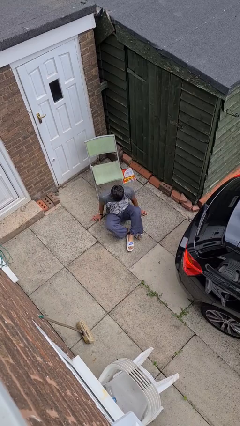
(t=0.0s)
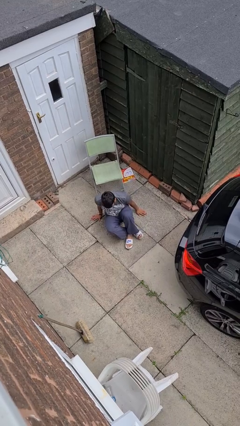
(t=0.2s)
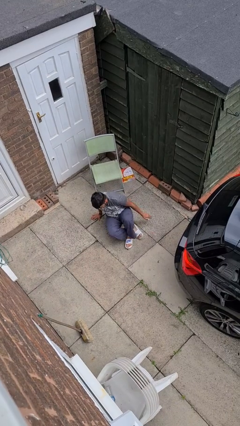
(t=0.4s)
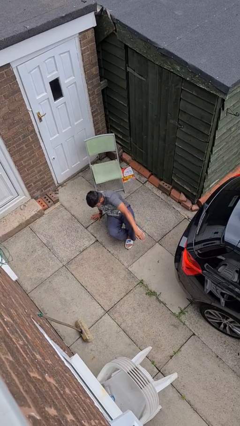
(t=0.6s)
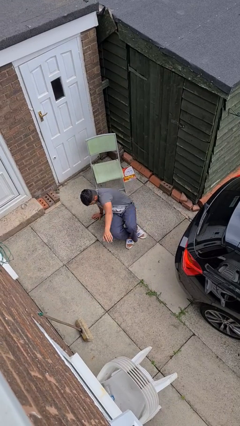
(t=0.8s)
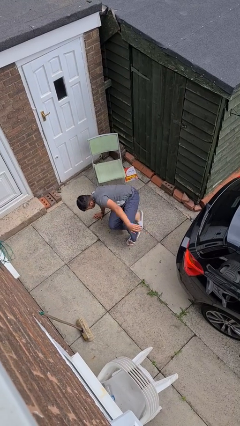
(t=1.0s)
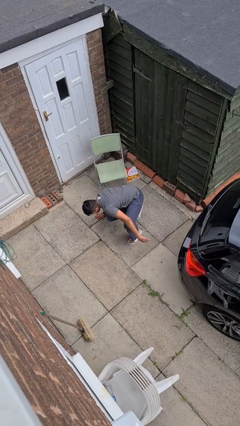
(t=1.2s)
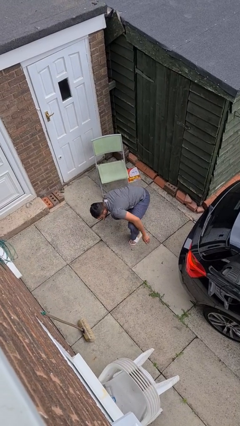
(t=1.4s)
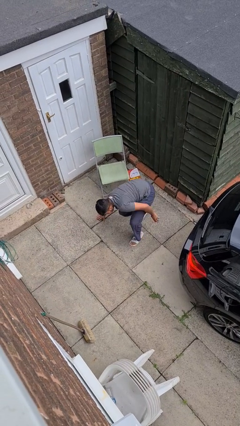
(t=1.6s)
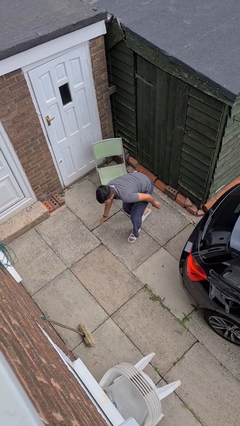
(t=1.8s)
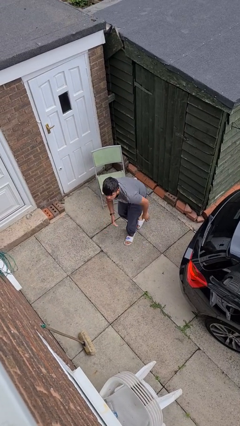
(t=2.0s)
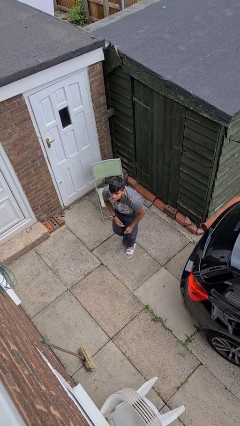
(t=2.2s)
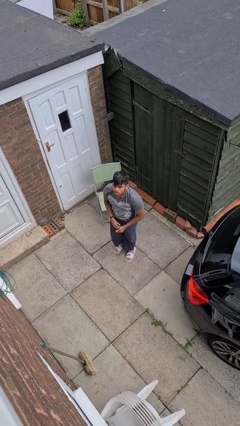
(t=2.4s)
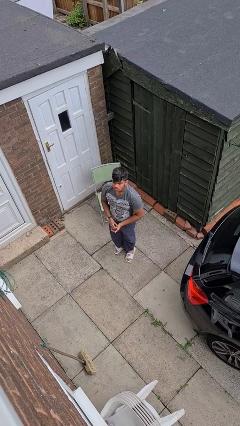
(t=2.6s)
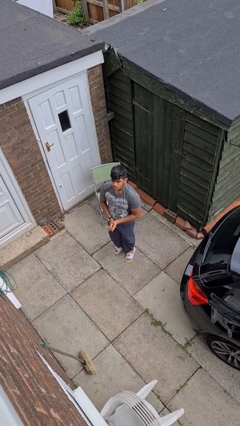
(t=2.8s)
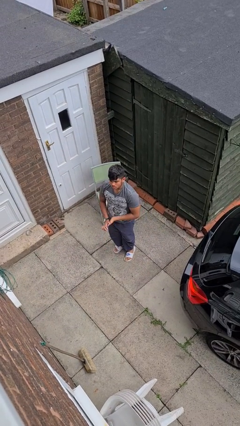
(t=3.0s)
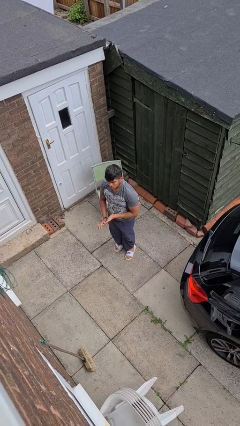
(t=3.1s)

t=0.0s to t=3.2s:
person stands up from floor

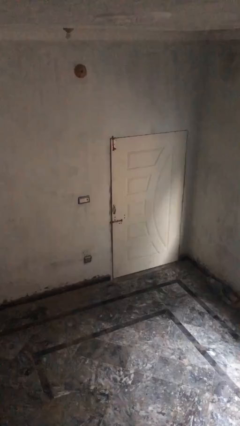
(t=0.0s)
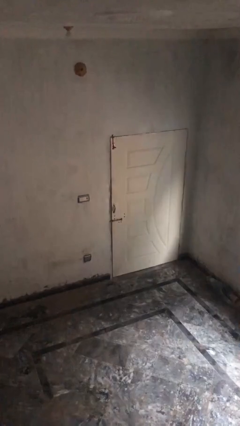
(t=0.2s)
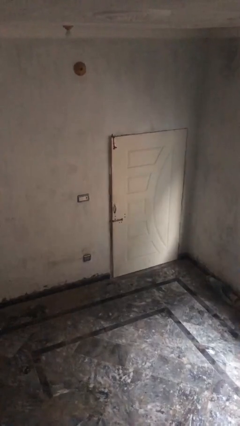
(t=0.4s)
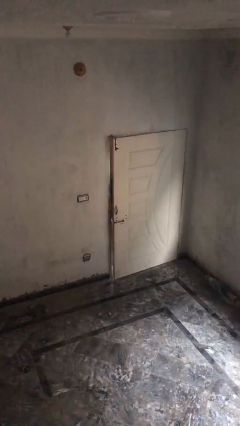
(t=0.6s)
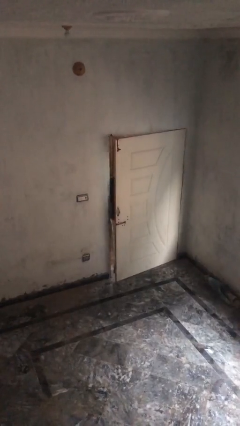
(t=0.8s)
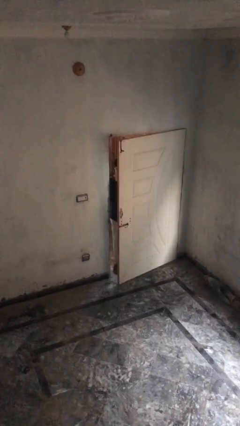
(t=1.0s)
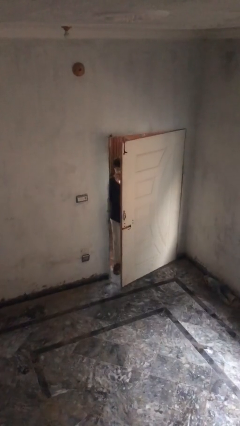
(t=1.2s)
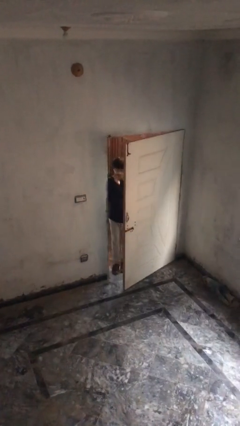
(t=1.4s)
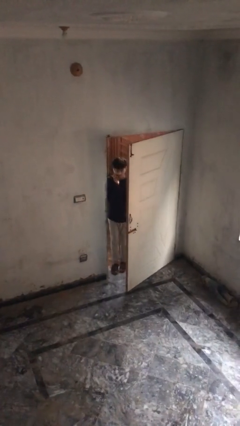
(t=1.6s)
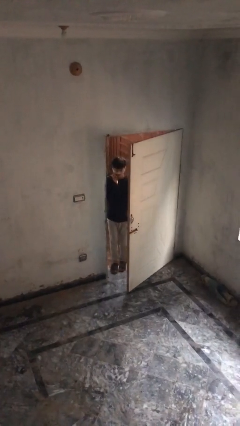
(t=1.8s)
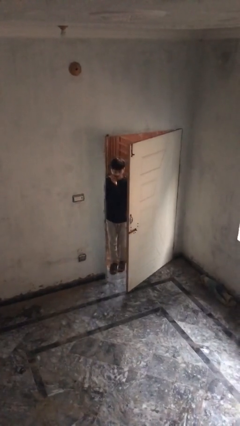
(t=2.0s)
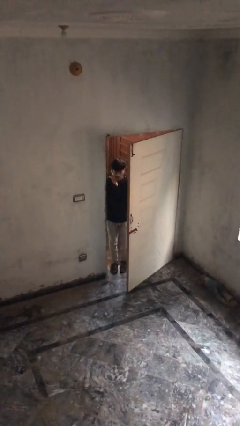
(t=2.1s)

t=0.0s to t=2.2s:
person opens facility door

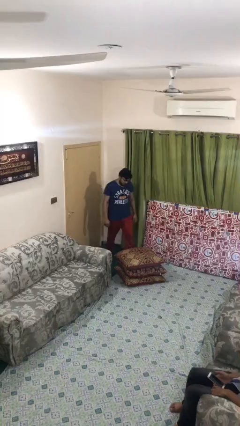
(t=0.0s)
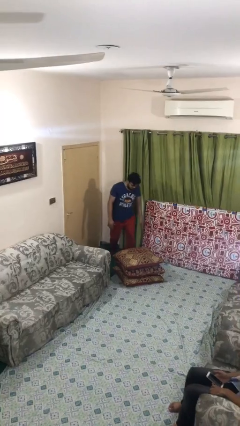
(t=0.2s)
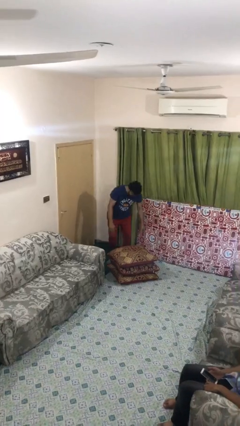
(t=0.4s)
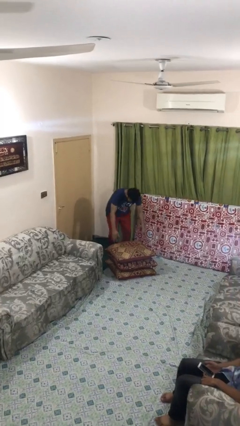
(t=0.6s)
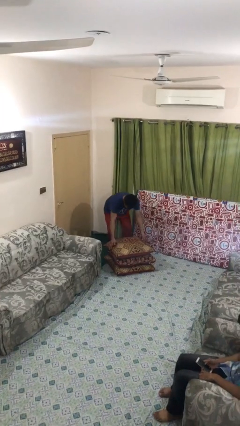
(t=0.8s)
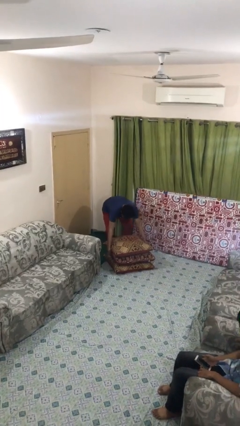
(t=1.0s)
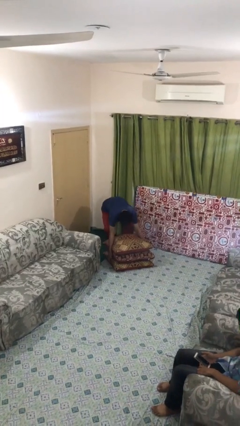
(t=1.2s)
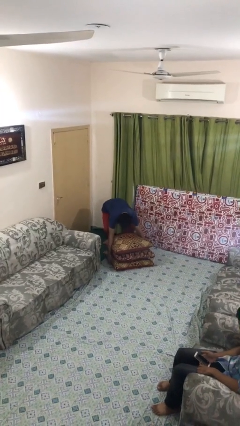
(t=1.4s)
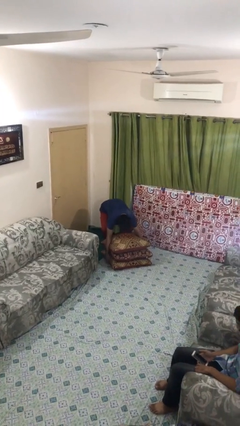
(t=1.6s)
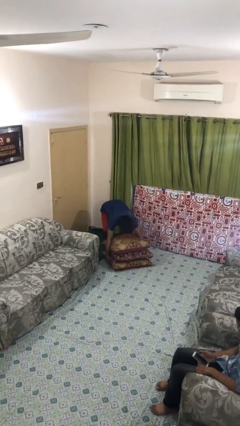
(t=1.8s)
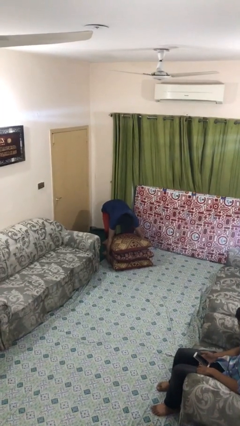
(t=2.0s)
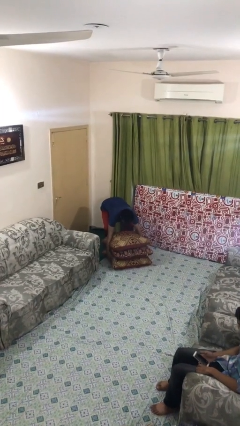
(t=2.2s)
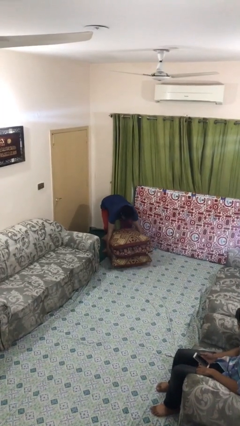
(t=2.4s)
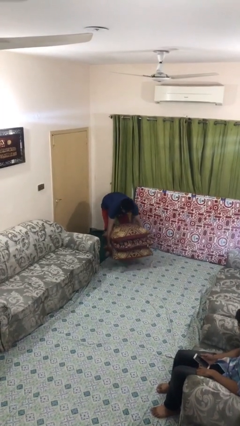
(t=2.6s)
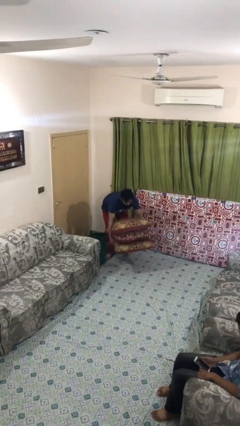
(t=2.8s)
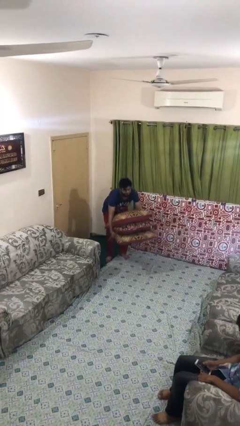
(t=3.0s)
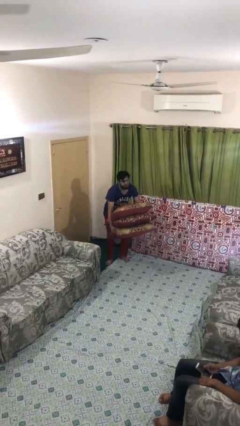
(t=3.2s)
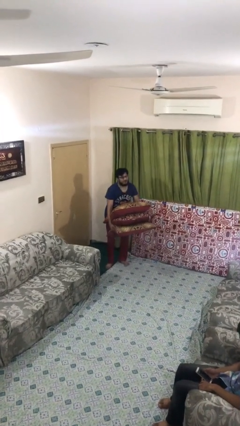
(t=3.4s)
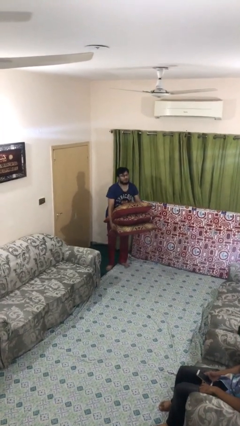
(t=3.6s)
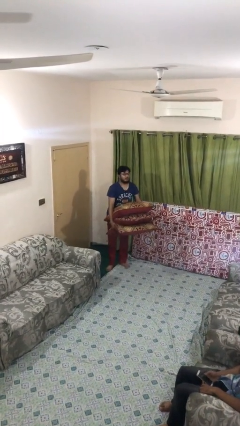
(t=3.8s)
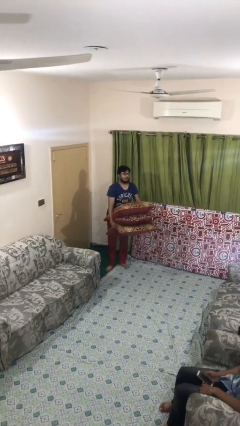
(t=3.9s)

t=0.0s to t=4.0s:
person picks up object from floor

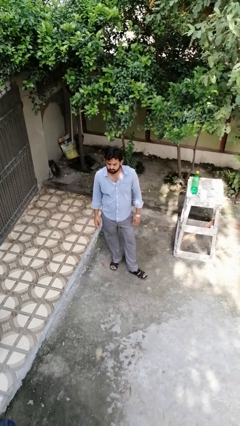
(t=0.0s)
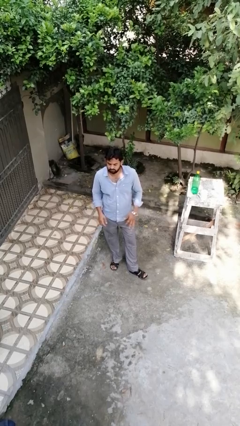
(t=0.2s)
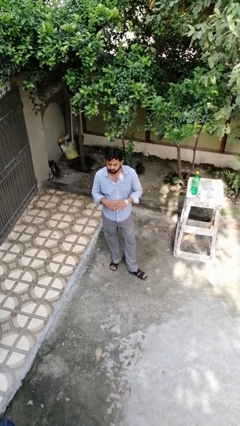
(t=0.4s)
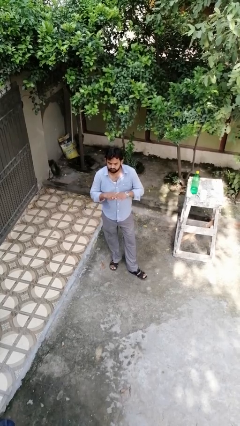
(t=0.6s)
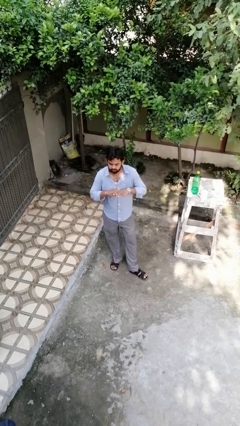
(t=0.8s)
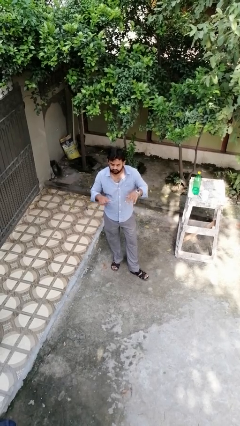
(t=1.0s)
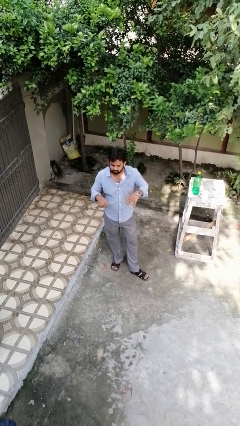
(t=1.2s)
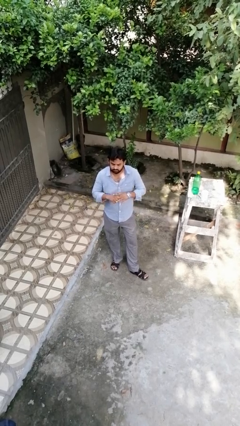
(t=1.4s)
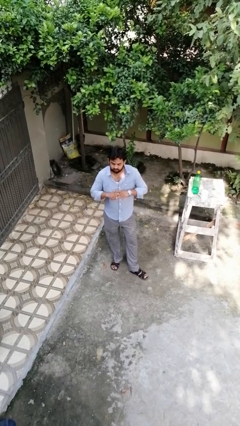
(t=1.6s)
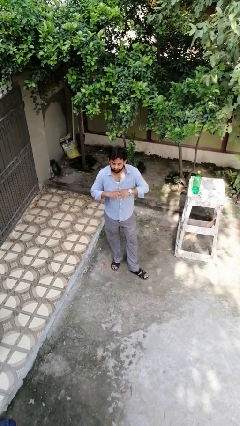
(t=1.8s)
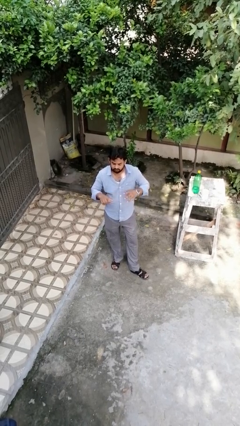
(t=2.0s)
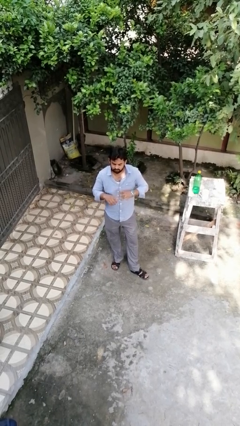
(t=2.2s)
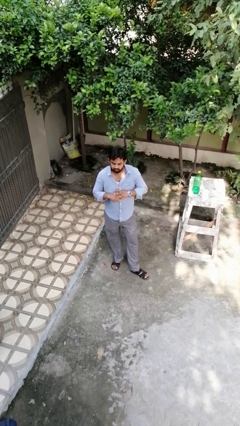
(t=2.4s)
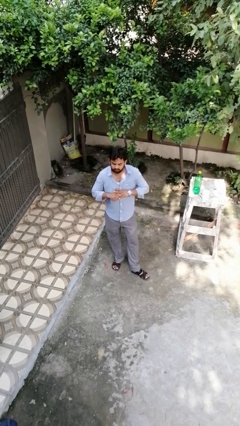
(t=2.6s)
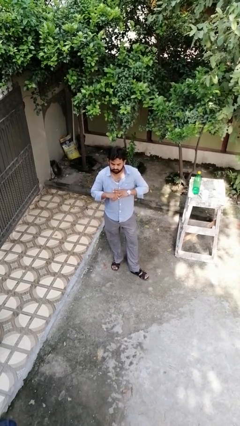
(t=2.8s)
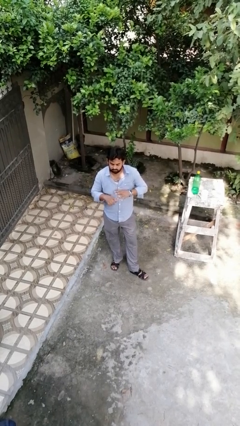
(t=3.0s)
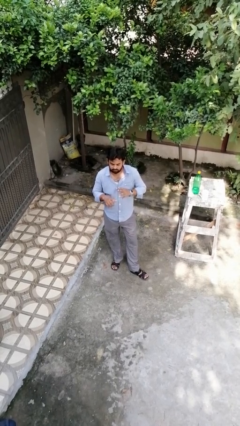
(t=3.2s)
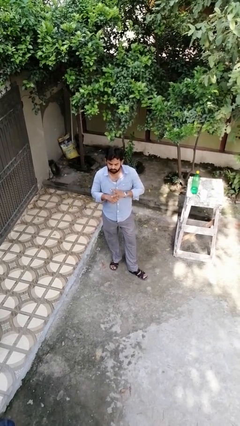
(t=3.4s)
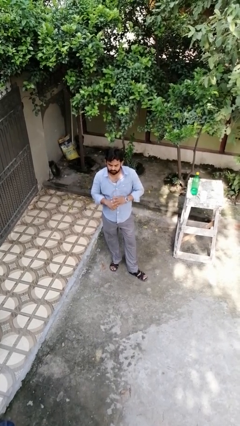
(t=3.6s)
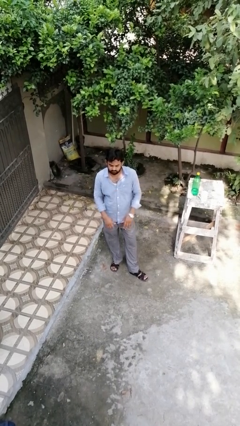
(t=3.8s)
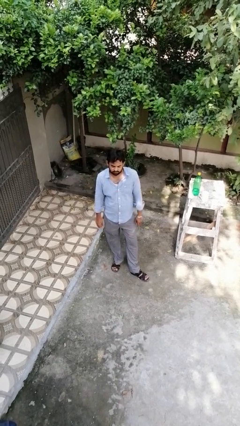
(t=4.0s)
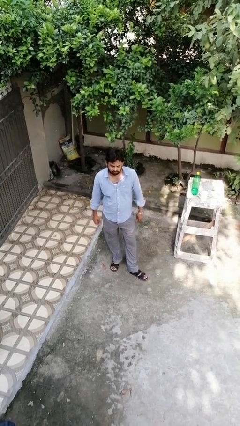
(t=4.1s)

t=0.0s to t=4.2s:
person snaps fingers

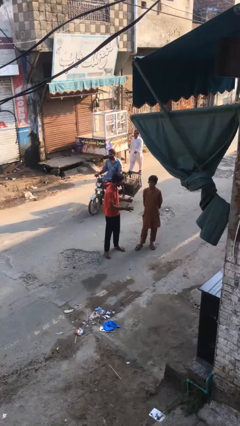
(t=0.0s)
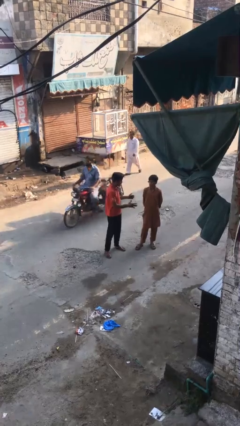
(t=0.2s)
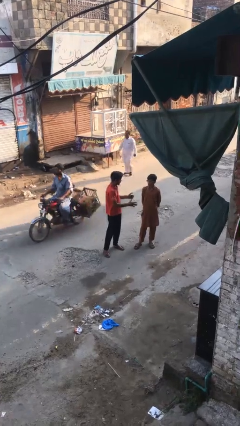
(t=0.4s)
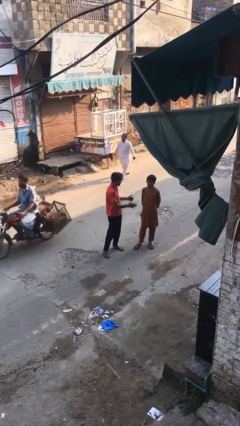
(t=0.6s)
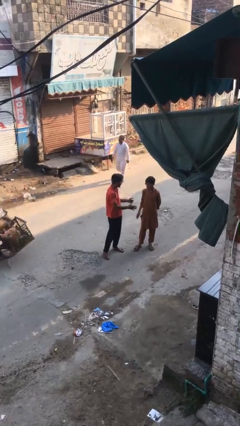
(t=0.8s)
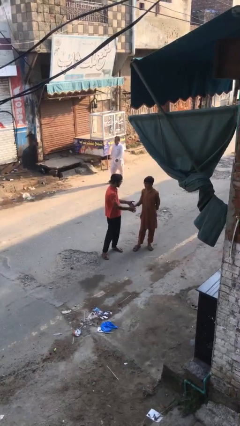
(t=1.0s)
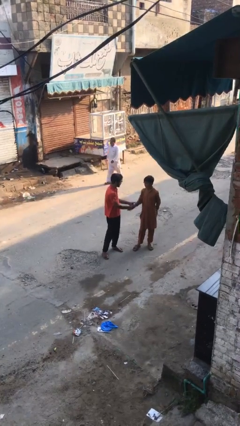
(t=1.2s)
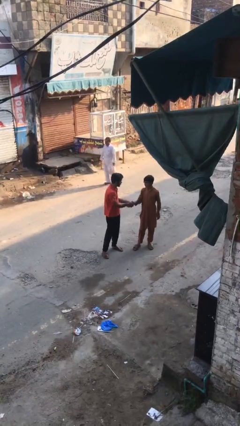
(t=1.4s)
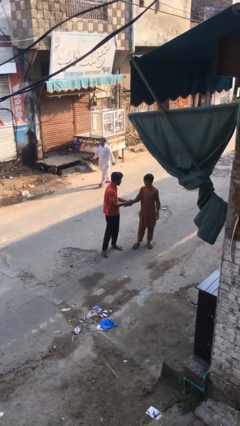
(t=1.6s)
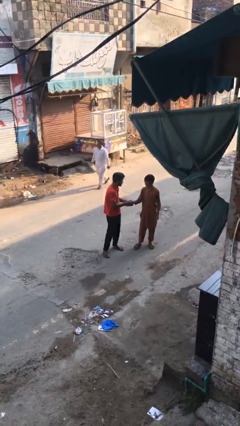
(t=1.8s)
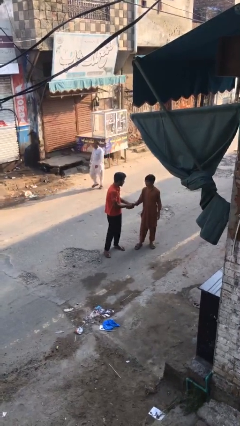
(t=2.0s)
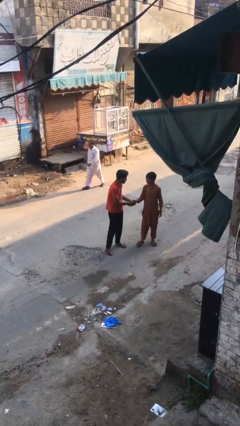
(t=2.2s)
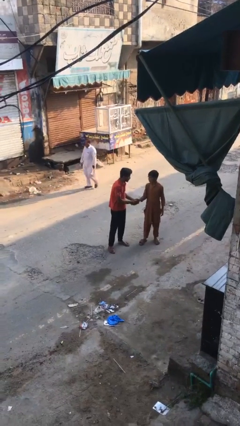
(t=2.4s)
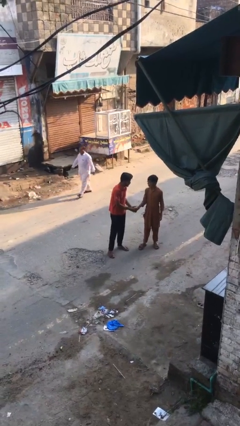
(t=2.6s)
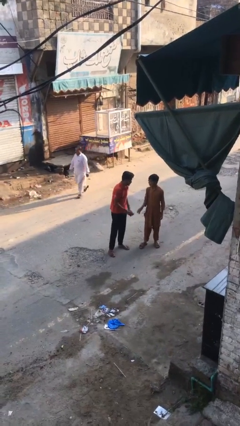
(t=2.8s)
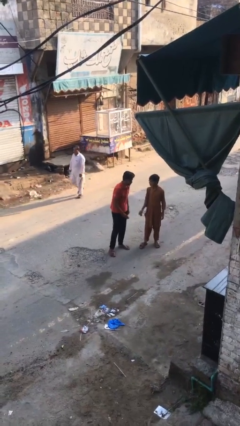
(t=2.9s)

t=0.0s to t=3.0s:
person shakes hand

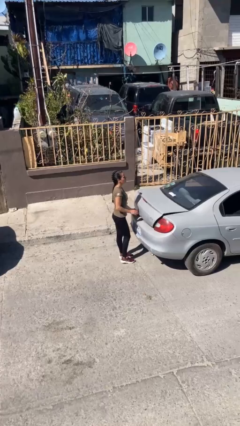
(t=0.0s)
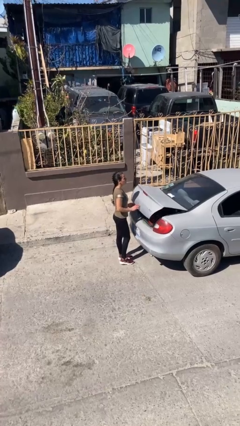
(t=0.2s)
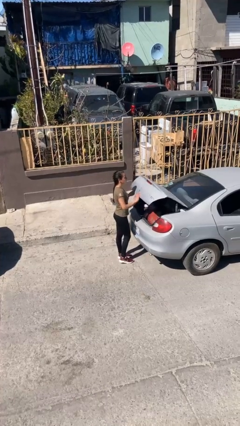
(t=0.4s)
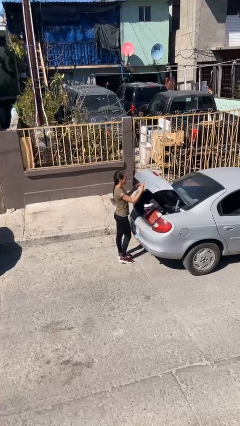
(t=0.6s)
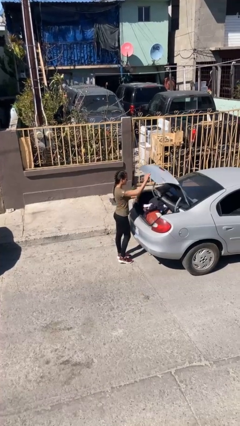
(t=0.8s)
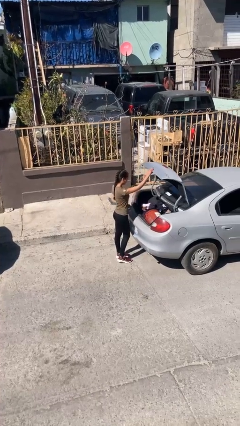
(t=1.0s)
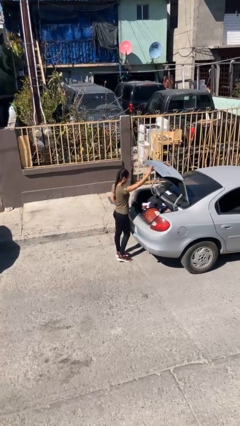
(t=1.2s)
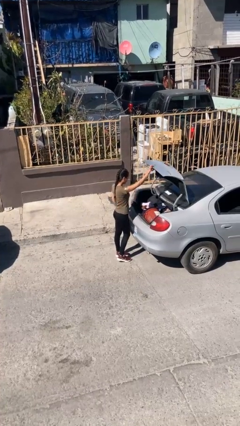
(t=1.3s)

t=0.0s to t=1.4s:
person opens car trunk
